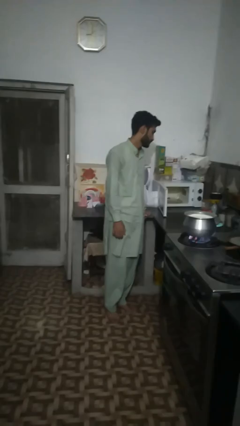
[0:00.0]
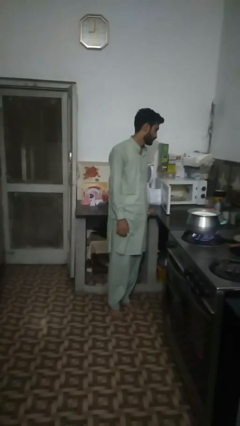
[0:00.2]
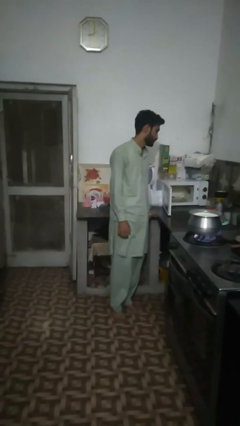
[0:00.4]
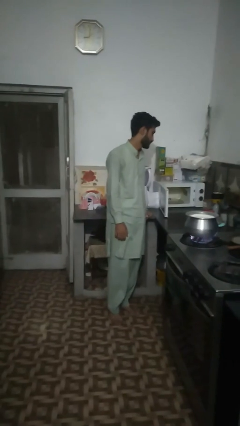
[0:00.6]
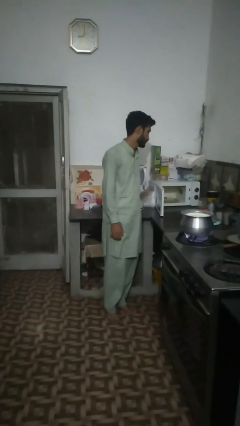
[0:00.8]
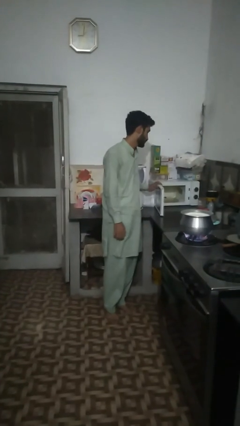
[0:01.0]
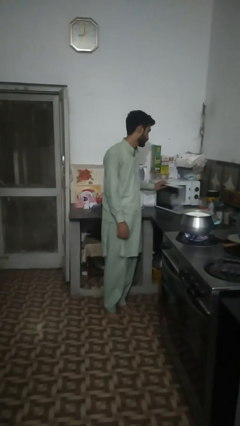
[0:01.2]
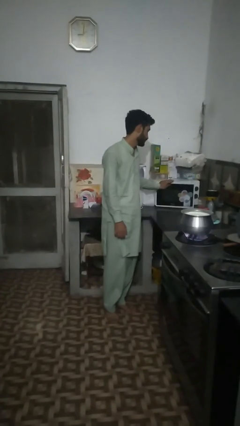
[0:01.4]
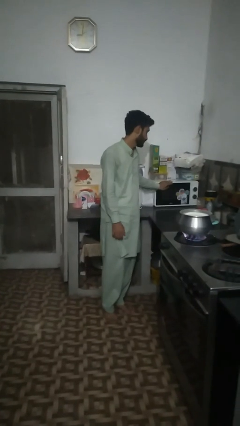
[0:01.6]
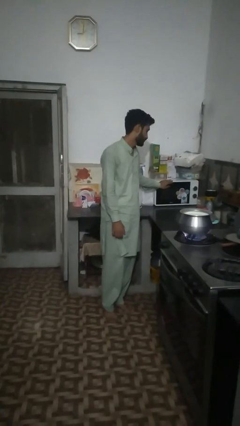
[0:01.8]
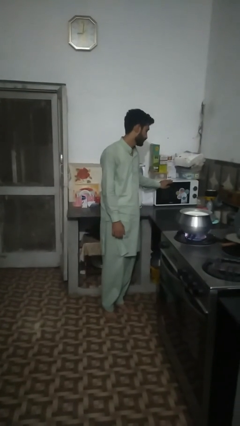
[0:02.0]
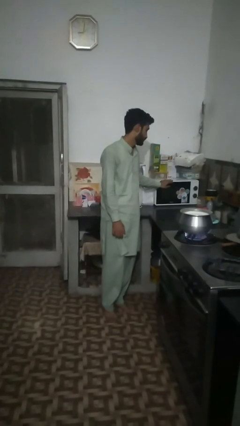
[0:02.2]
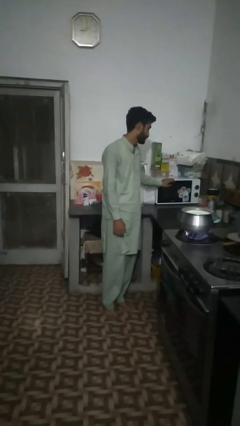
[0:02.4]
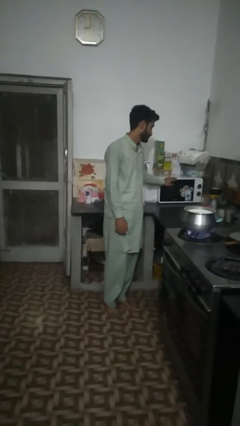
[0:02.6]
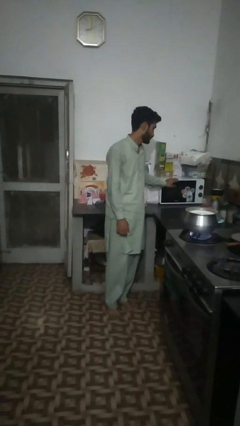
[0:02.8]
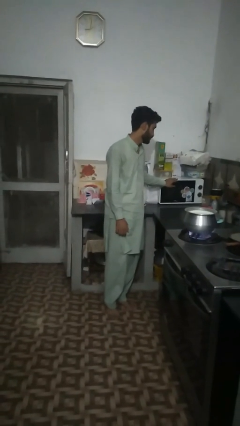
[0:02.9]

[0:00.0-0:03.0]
person closes microwave

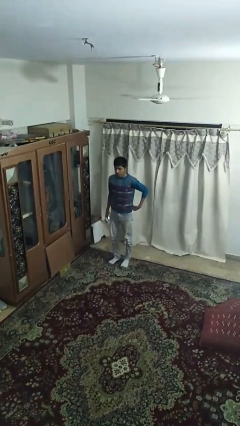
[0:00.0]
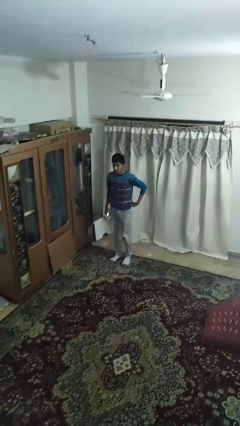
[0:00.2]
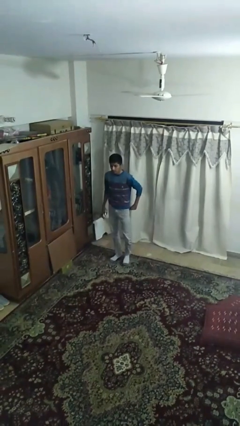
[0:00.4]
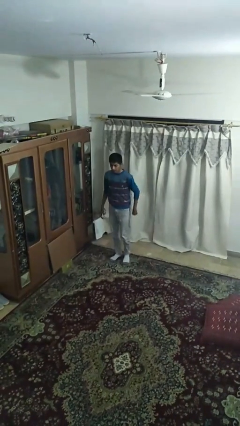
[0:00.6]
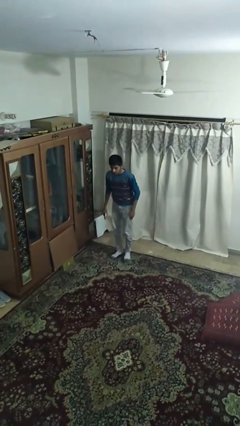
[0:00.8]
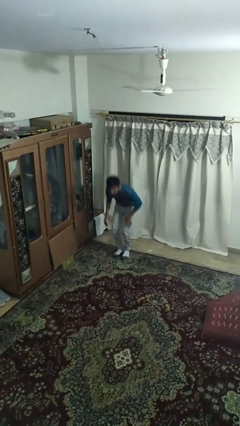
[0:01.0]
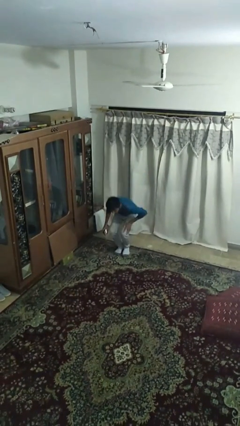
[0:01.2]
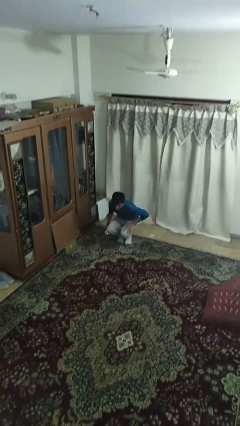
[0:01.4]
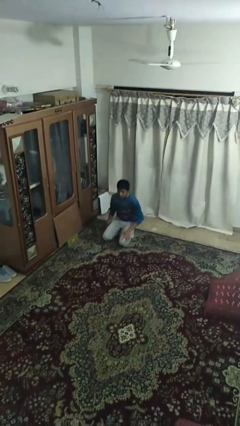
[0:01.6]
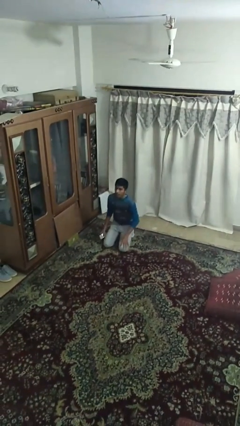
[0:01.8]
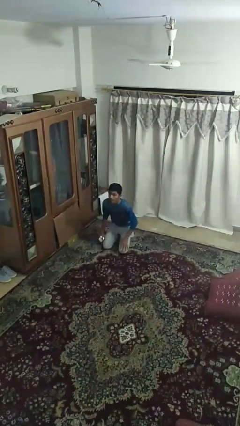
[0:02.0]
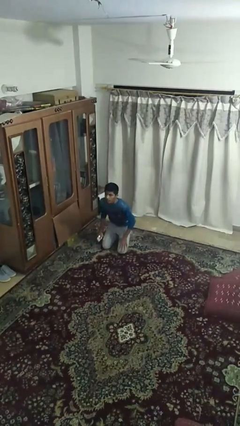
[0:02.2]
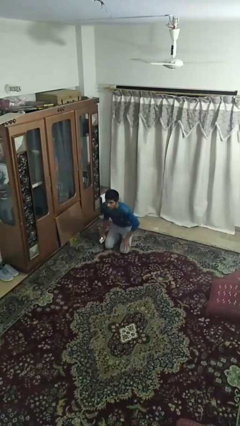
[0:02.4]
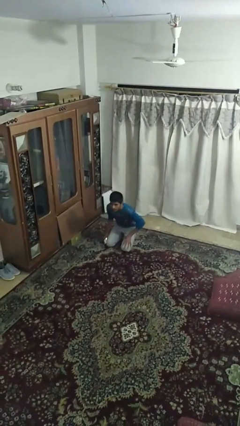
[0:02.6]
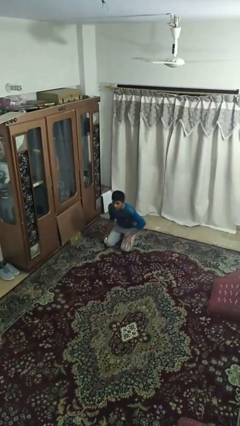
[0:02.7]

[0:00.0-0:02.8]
person sits down

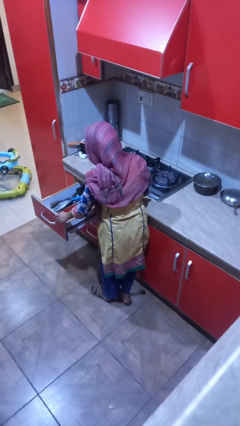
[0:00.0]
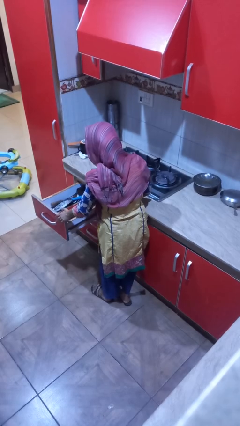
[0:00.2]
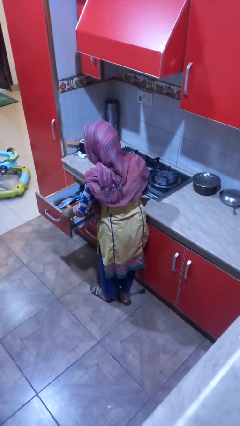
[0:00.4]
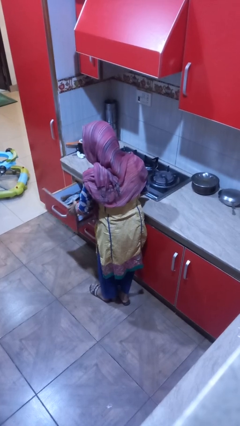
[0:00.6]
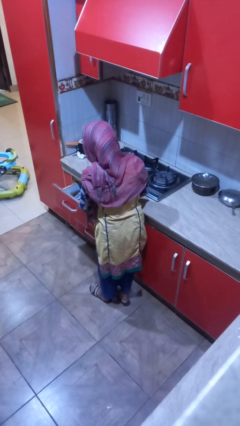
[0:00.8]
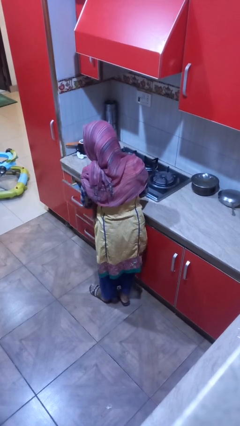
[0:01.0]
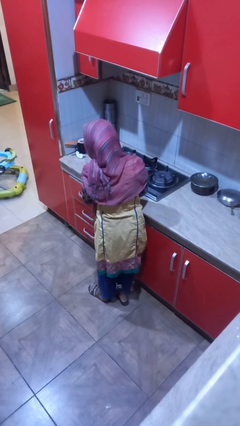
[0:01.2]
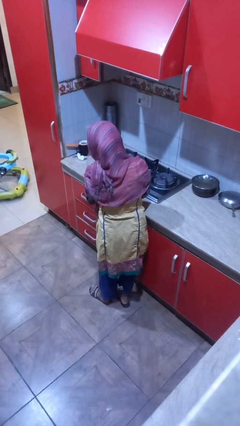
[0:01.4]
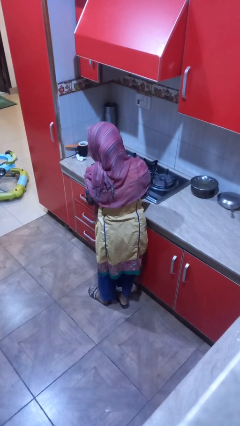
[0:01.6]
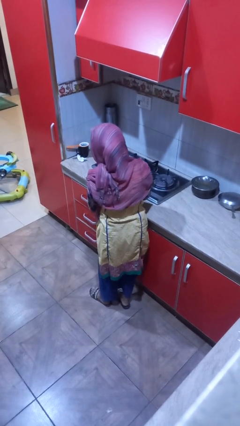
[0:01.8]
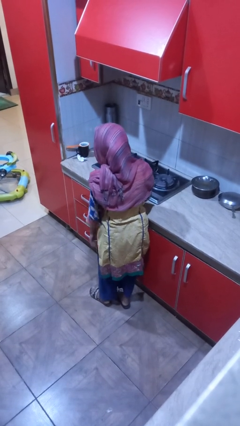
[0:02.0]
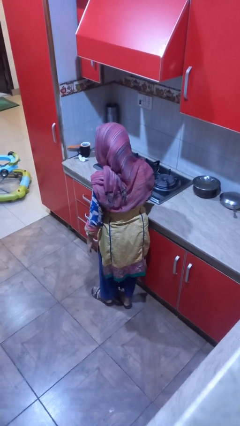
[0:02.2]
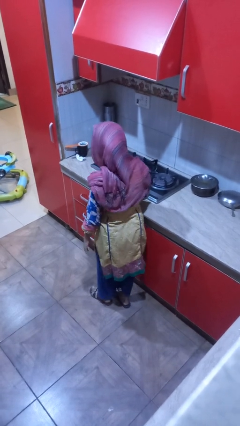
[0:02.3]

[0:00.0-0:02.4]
person closes kitchen drawer

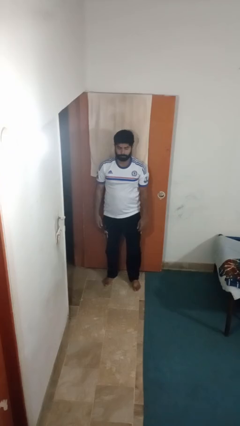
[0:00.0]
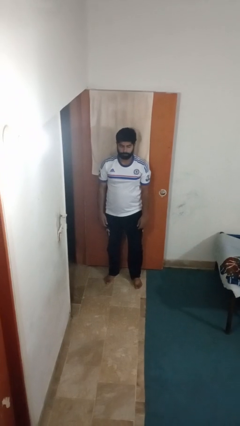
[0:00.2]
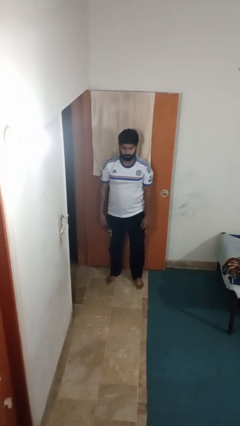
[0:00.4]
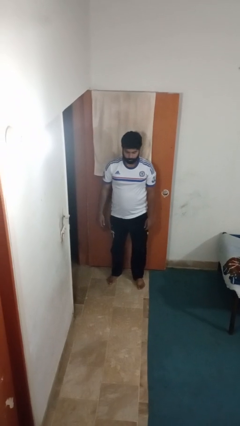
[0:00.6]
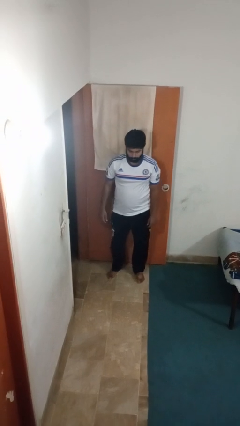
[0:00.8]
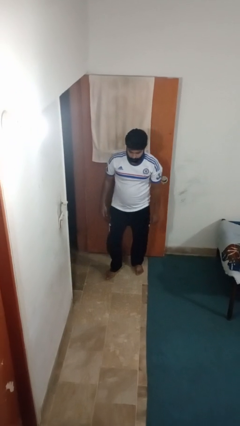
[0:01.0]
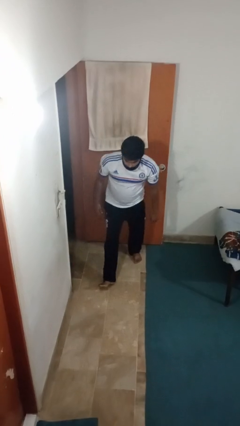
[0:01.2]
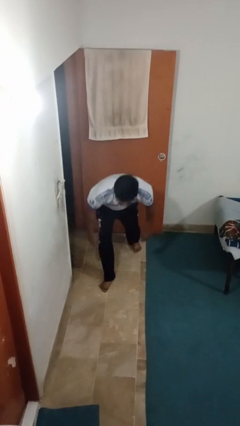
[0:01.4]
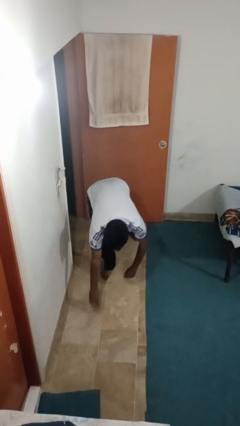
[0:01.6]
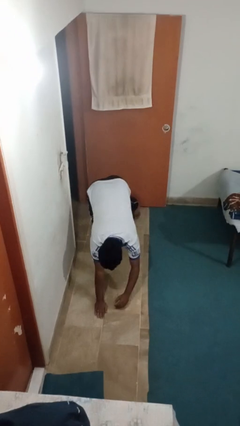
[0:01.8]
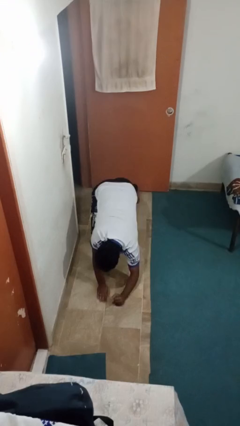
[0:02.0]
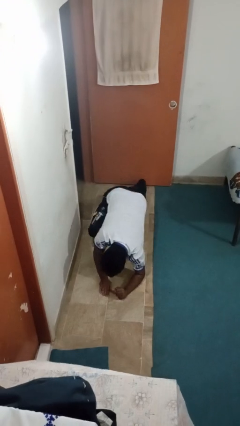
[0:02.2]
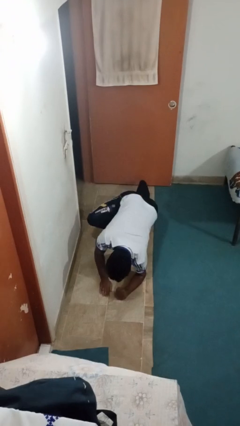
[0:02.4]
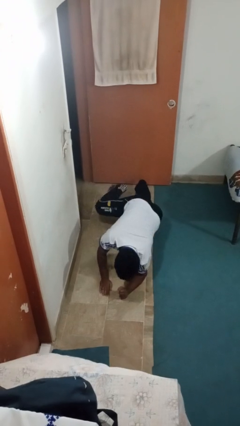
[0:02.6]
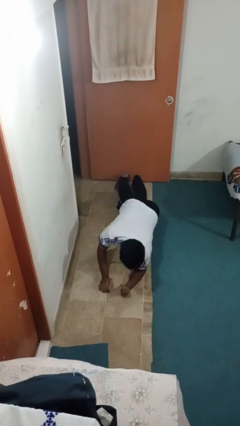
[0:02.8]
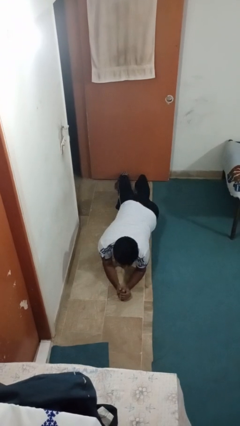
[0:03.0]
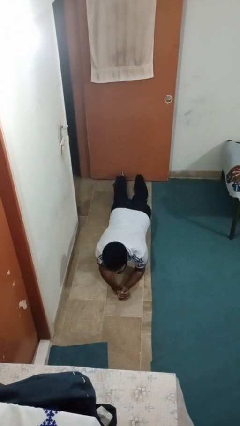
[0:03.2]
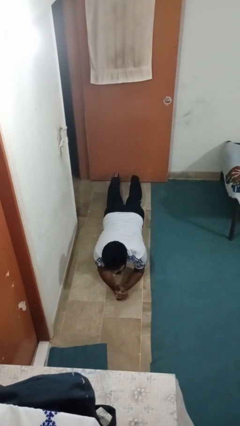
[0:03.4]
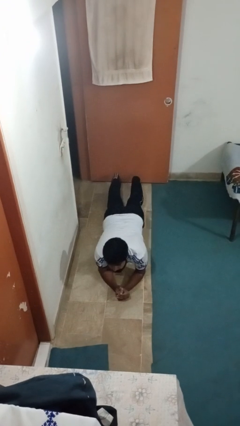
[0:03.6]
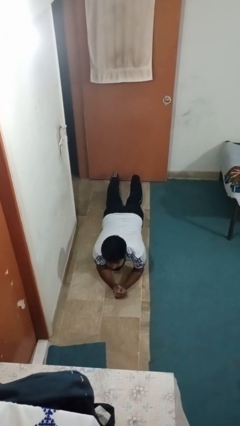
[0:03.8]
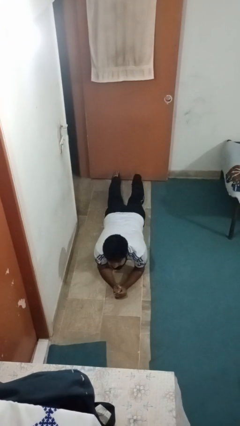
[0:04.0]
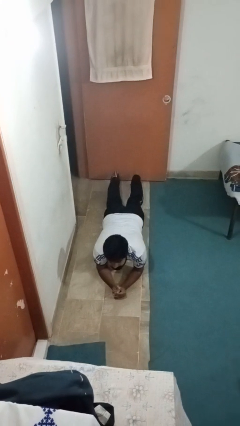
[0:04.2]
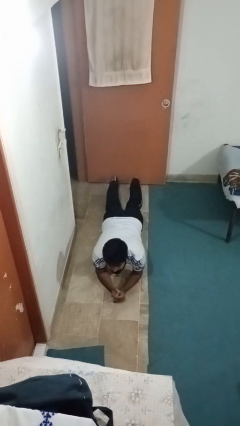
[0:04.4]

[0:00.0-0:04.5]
person exercises with plank

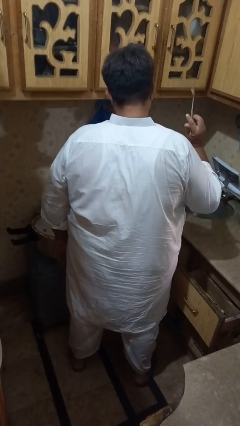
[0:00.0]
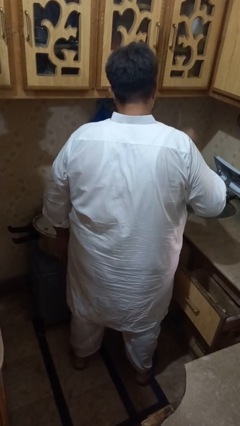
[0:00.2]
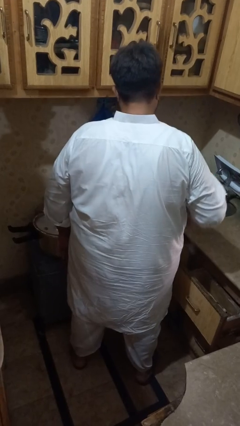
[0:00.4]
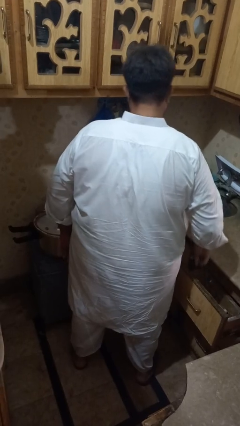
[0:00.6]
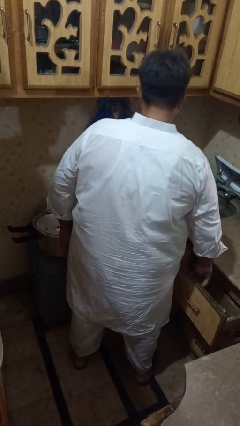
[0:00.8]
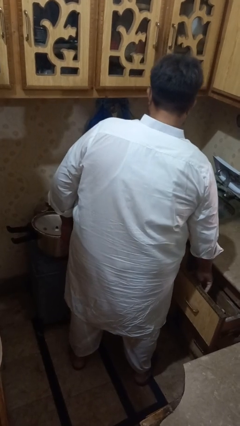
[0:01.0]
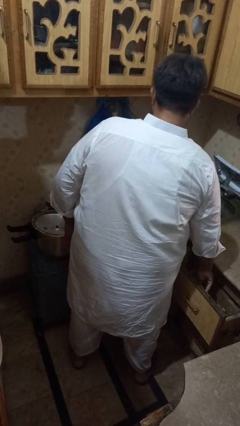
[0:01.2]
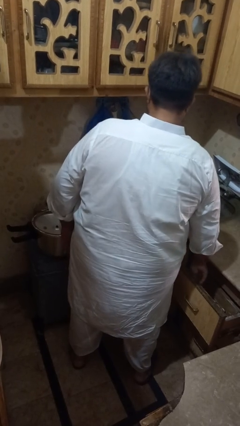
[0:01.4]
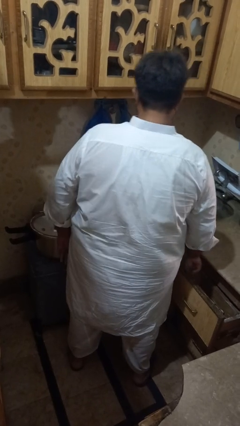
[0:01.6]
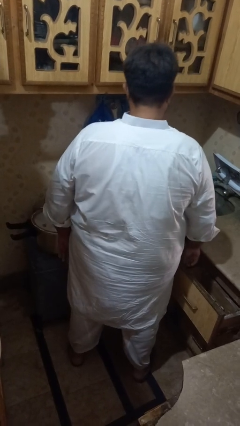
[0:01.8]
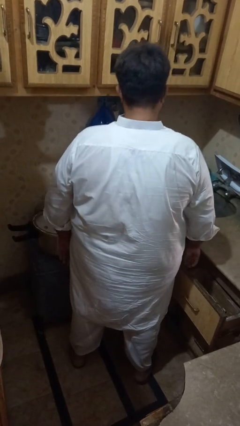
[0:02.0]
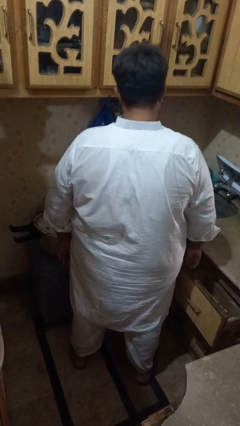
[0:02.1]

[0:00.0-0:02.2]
person puts object into kitchen drawer

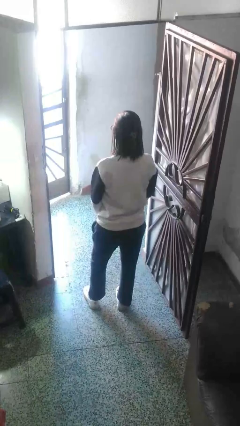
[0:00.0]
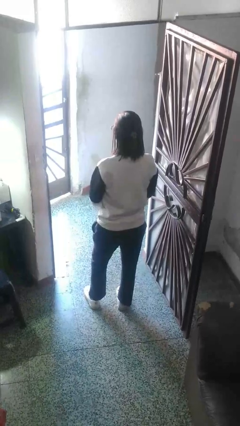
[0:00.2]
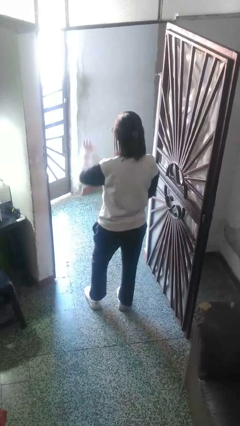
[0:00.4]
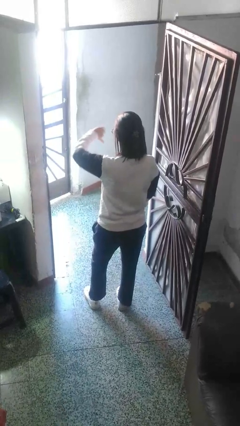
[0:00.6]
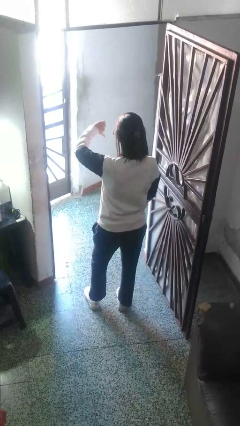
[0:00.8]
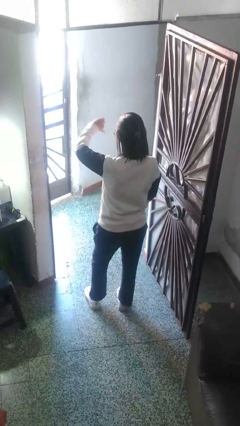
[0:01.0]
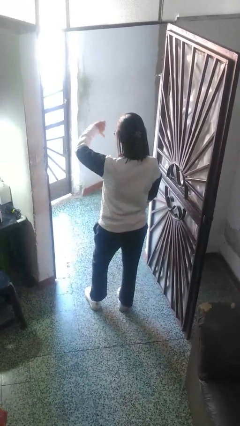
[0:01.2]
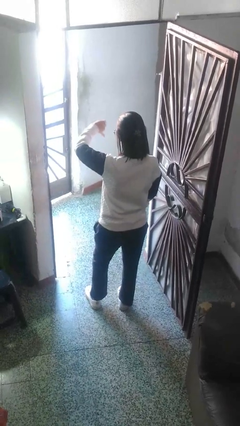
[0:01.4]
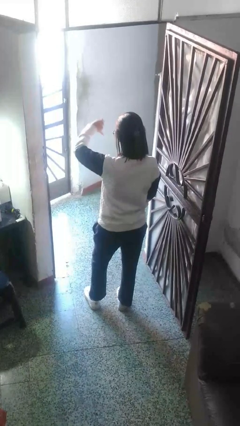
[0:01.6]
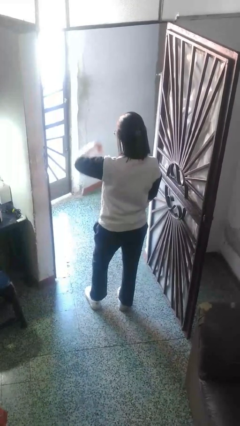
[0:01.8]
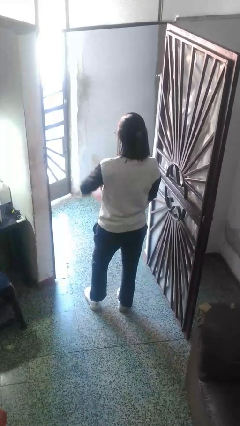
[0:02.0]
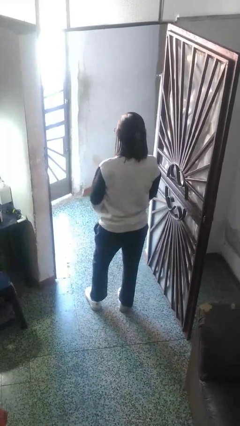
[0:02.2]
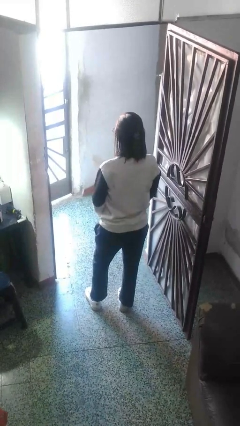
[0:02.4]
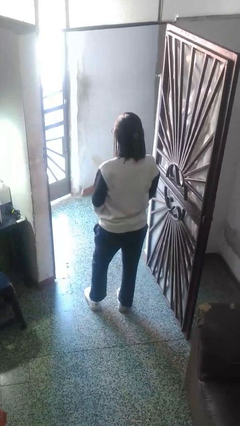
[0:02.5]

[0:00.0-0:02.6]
person gestures thumbs down
